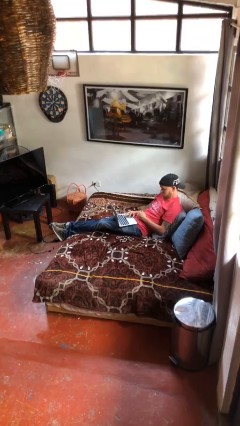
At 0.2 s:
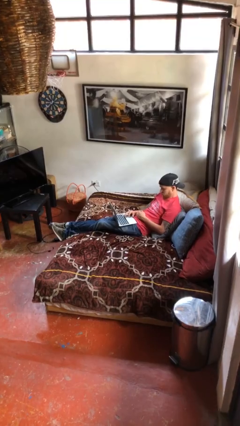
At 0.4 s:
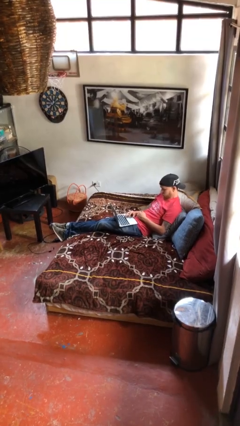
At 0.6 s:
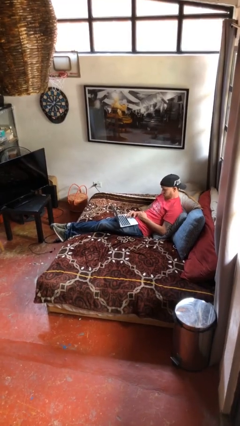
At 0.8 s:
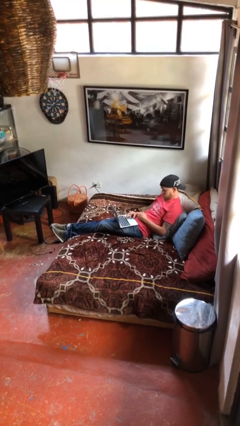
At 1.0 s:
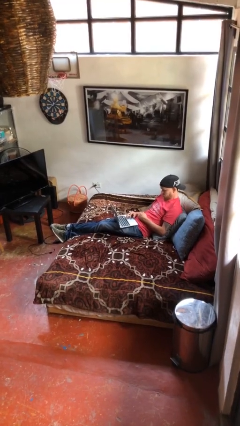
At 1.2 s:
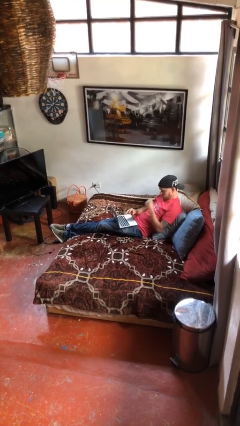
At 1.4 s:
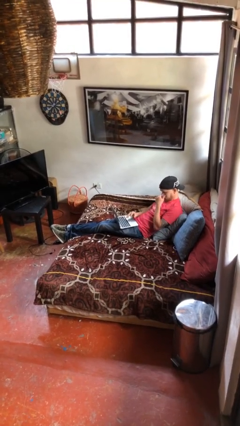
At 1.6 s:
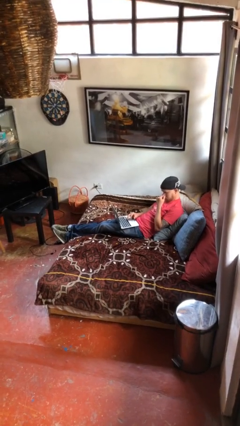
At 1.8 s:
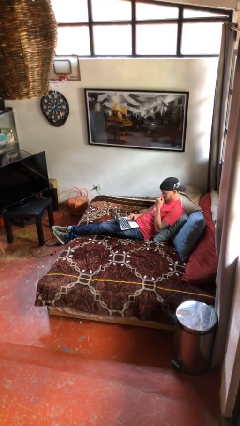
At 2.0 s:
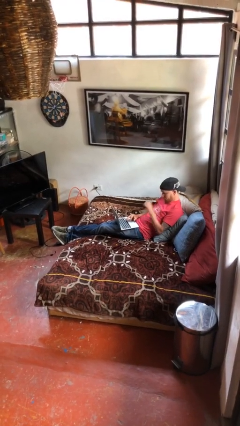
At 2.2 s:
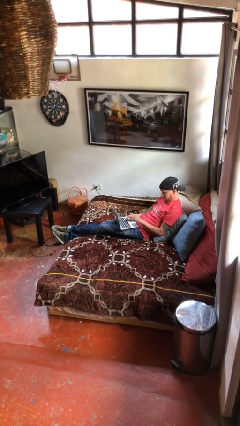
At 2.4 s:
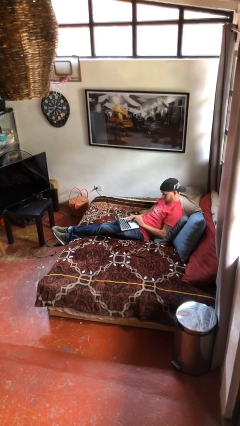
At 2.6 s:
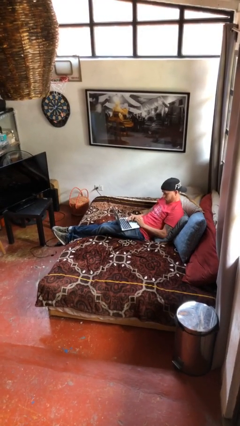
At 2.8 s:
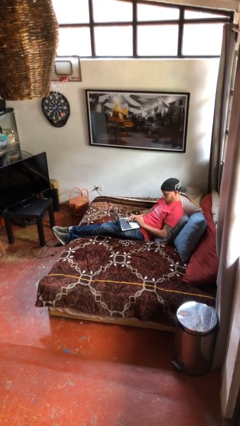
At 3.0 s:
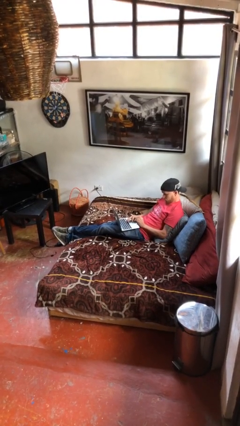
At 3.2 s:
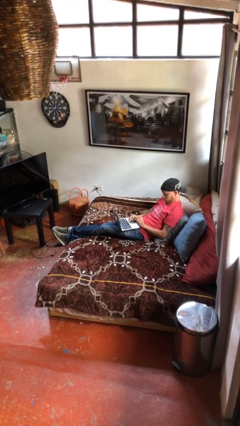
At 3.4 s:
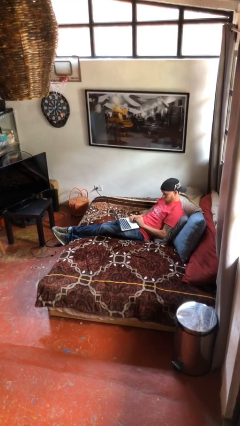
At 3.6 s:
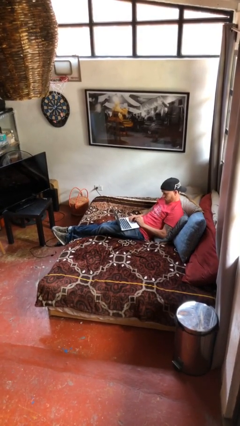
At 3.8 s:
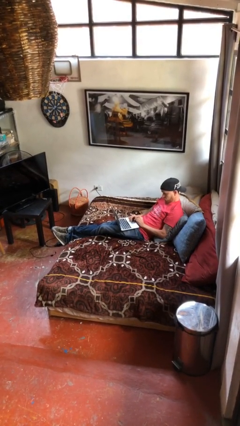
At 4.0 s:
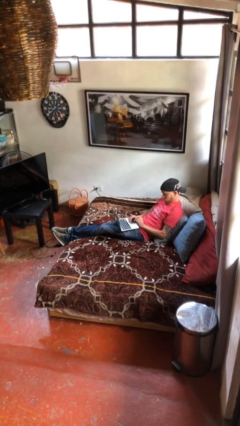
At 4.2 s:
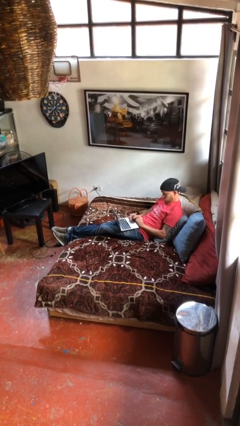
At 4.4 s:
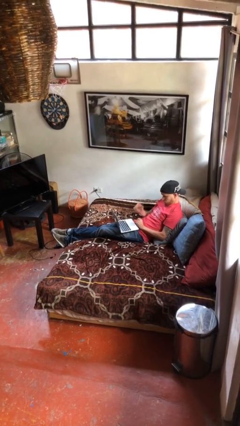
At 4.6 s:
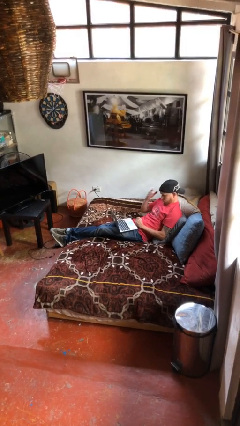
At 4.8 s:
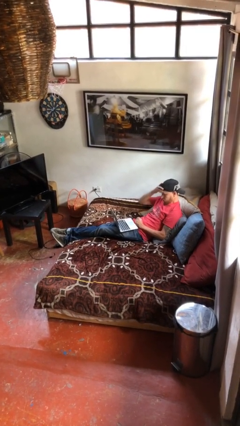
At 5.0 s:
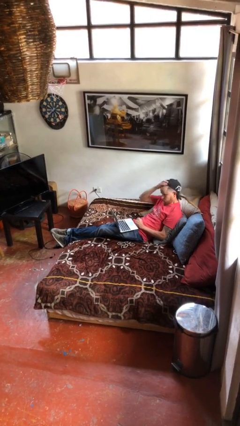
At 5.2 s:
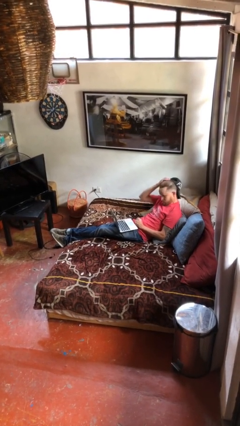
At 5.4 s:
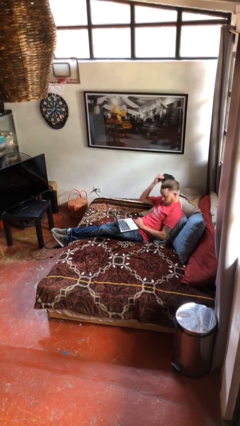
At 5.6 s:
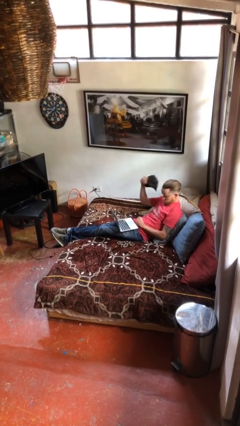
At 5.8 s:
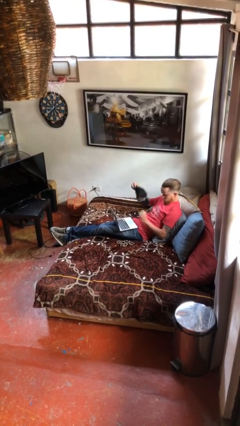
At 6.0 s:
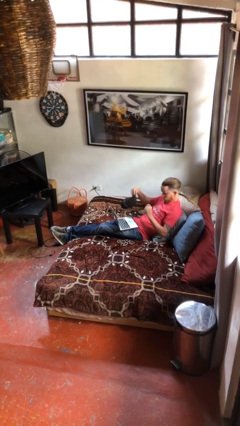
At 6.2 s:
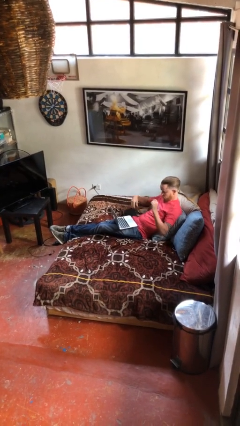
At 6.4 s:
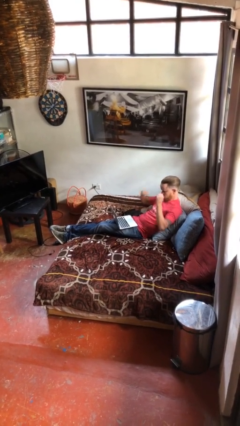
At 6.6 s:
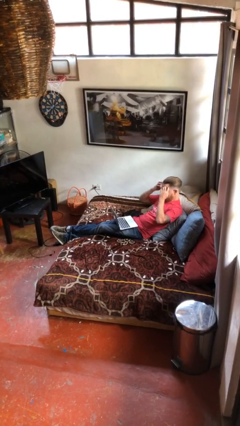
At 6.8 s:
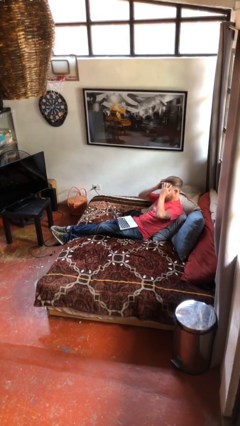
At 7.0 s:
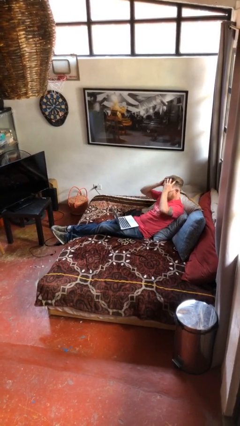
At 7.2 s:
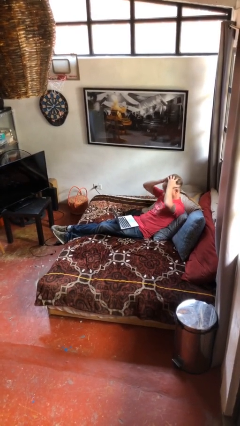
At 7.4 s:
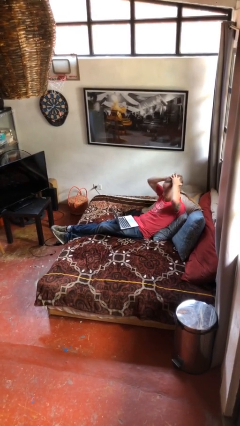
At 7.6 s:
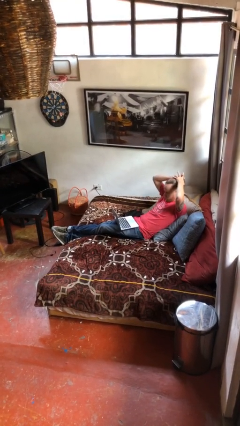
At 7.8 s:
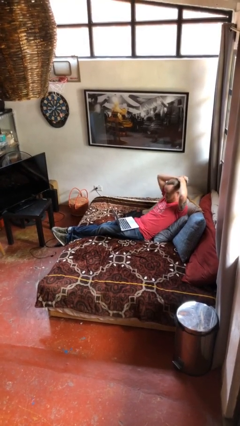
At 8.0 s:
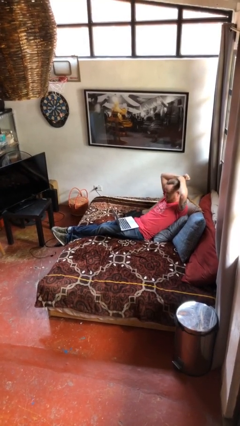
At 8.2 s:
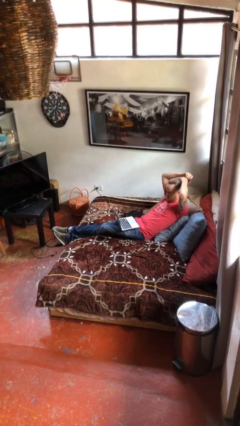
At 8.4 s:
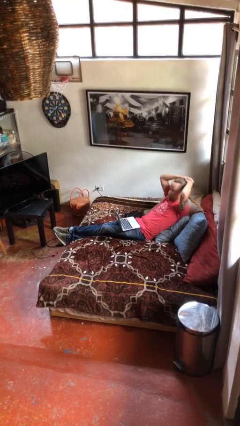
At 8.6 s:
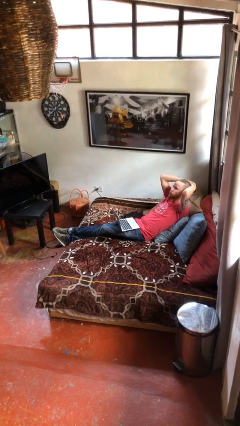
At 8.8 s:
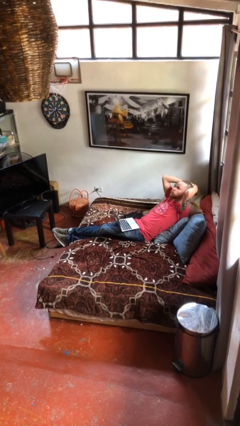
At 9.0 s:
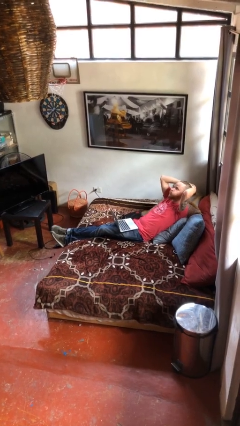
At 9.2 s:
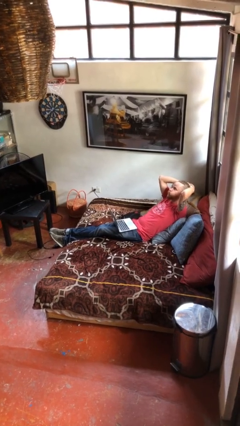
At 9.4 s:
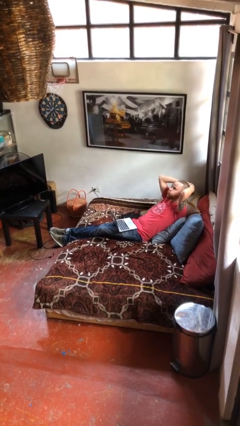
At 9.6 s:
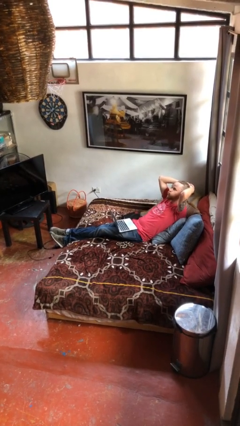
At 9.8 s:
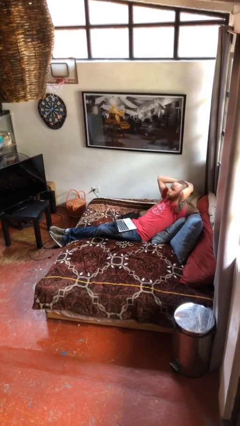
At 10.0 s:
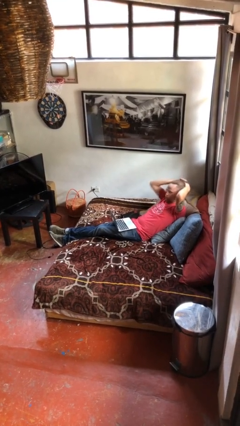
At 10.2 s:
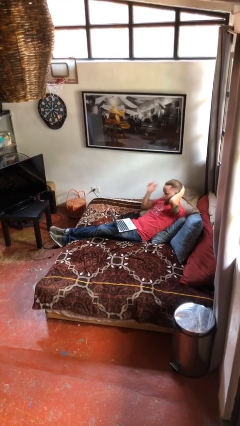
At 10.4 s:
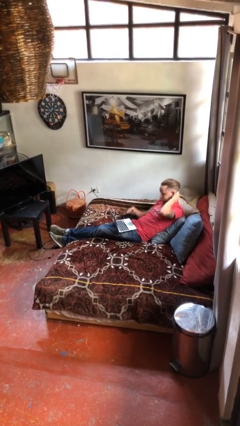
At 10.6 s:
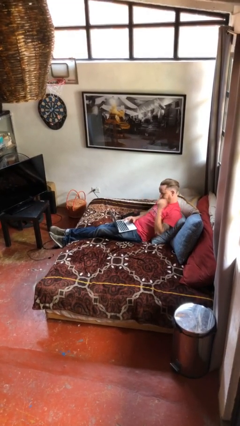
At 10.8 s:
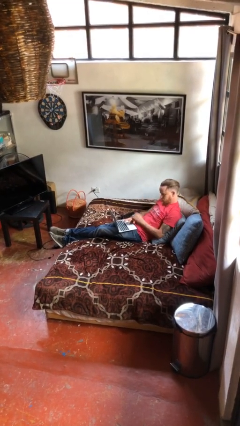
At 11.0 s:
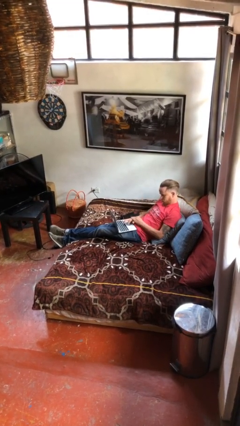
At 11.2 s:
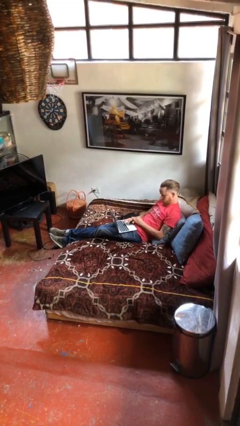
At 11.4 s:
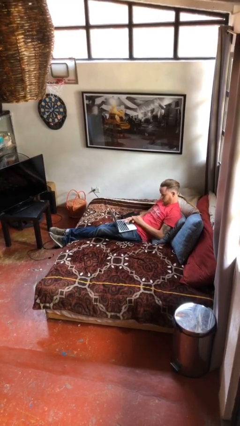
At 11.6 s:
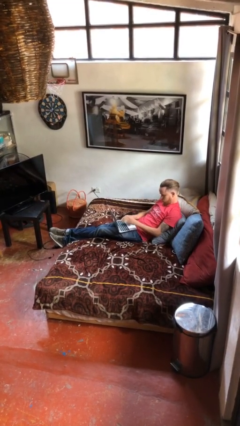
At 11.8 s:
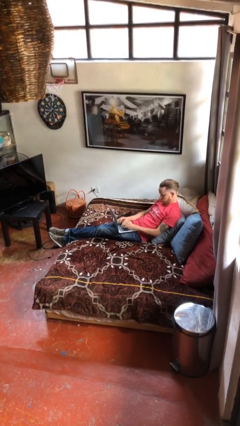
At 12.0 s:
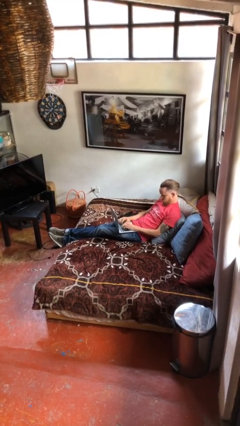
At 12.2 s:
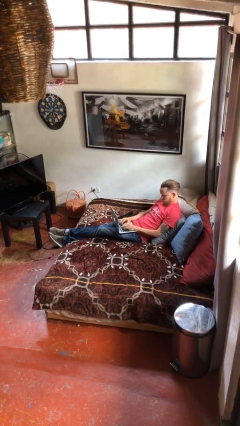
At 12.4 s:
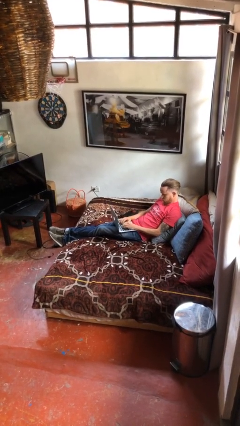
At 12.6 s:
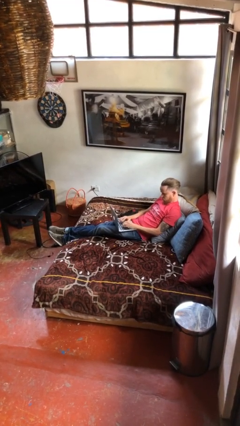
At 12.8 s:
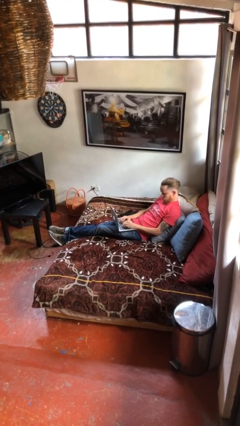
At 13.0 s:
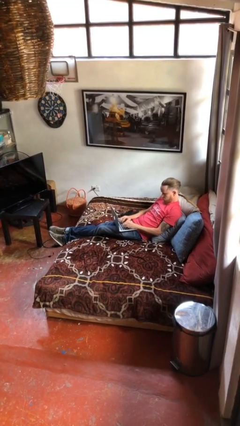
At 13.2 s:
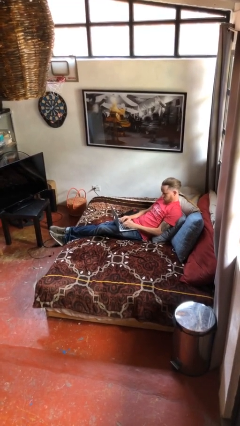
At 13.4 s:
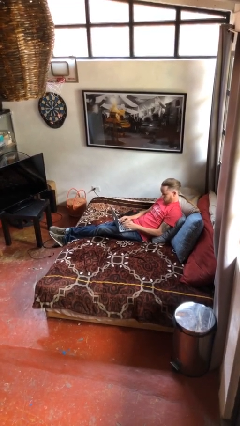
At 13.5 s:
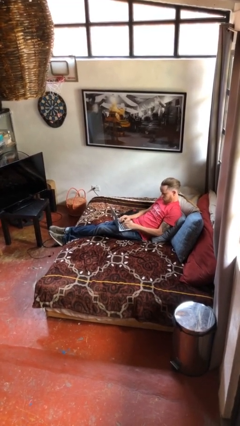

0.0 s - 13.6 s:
person interacts with laptop

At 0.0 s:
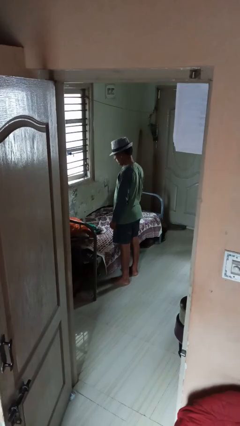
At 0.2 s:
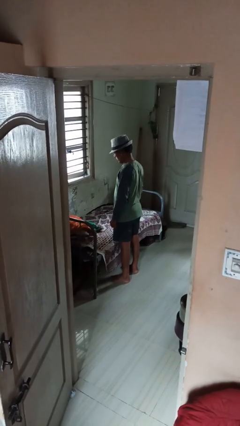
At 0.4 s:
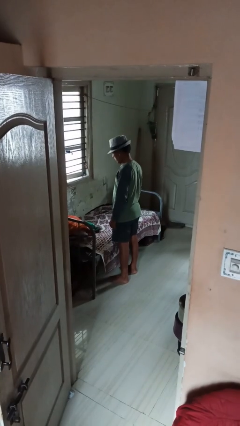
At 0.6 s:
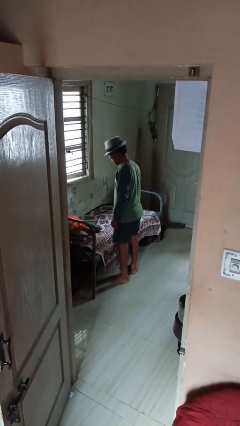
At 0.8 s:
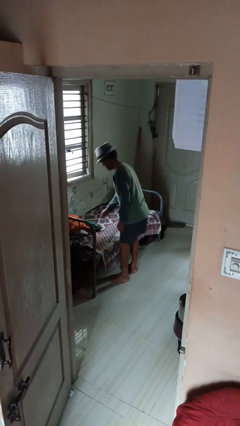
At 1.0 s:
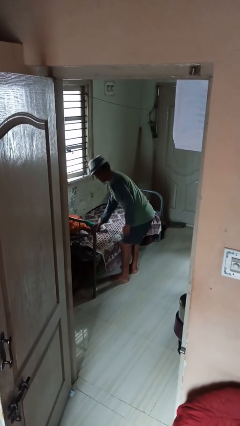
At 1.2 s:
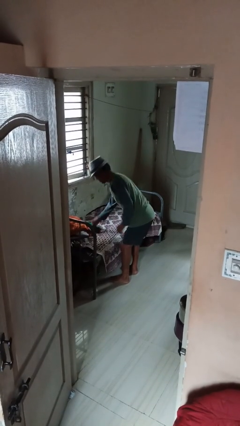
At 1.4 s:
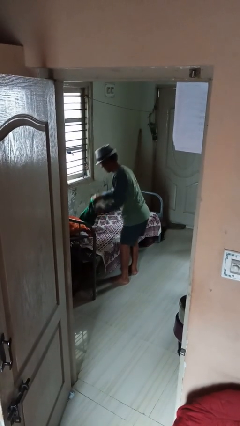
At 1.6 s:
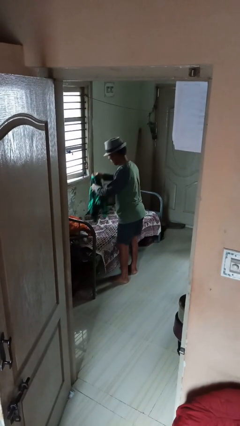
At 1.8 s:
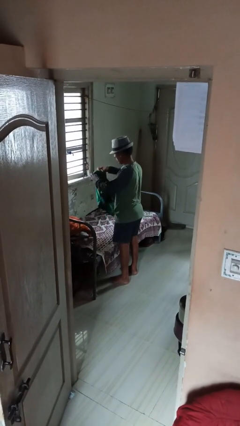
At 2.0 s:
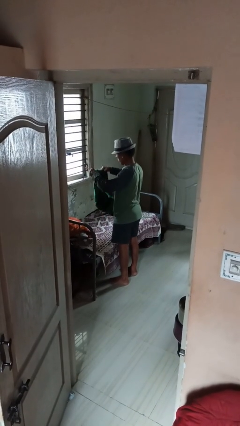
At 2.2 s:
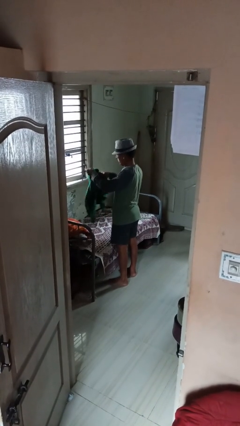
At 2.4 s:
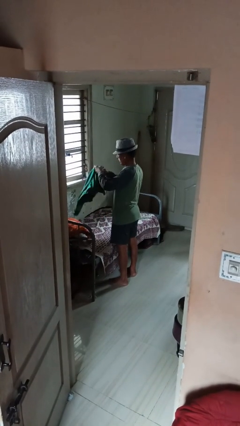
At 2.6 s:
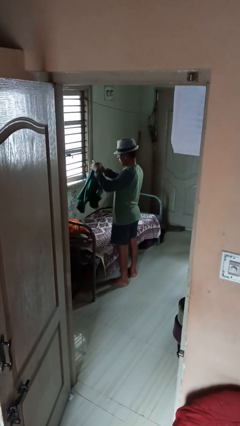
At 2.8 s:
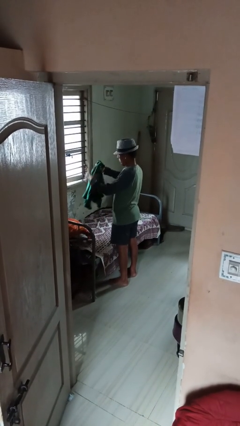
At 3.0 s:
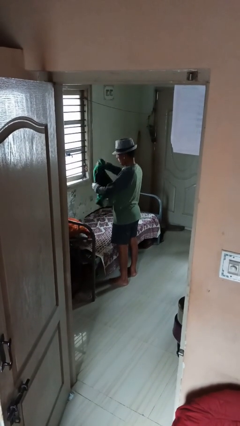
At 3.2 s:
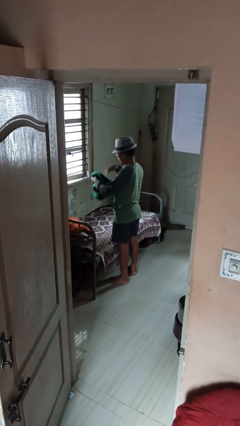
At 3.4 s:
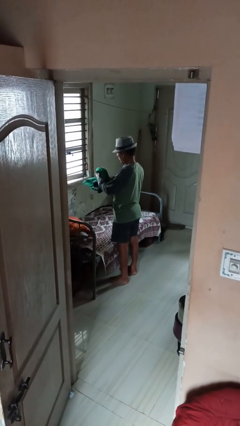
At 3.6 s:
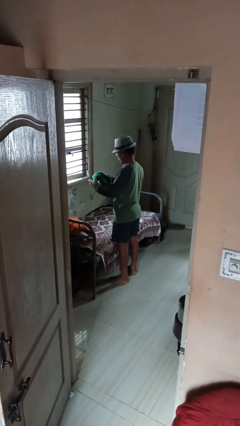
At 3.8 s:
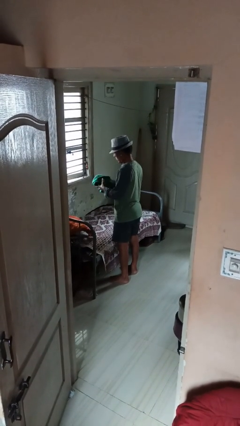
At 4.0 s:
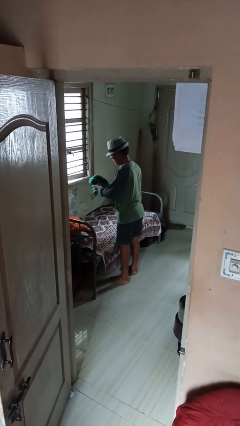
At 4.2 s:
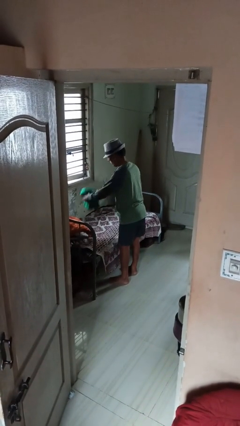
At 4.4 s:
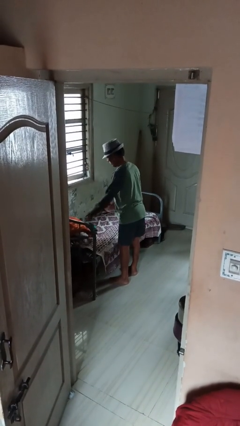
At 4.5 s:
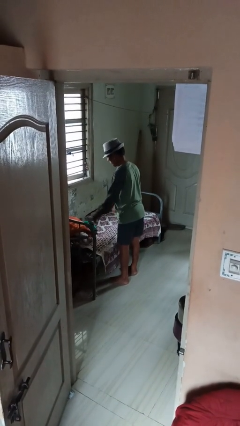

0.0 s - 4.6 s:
person folds shirt
